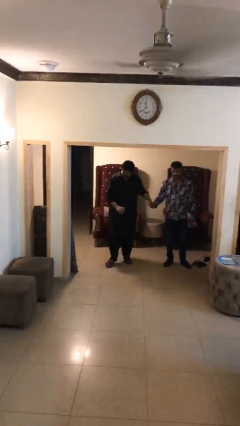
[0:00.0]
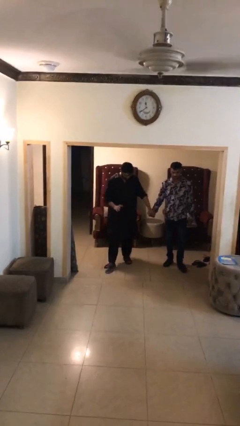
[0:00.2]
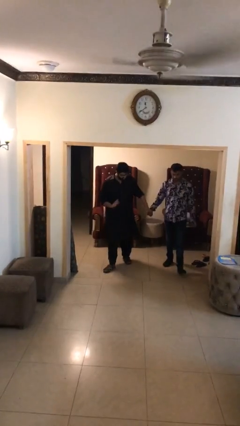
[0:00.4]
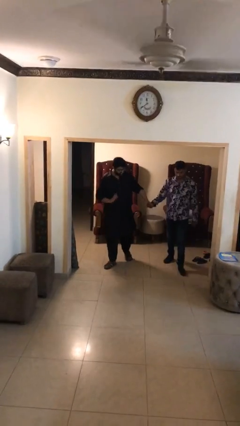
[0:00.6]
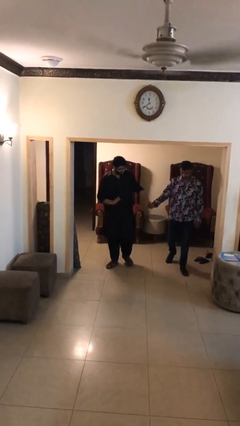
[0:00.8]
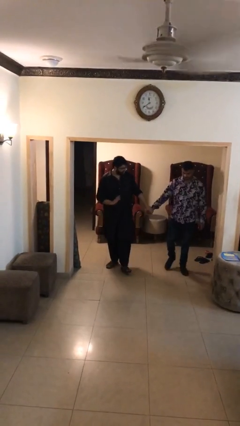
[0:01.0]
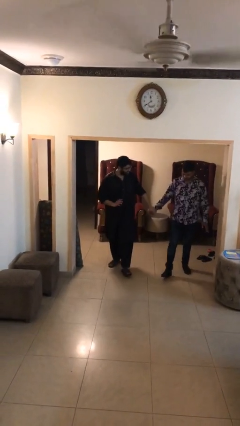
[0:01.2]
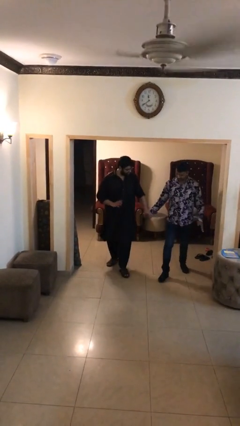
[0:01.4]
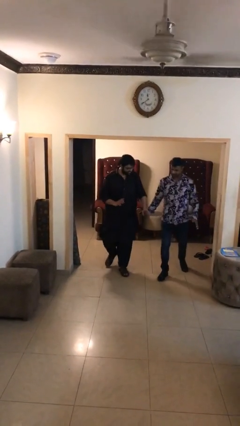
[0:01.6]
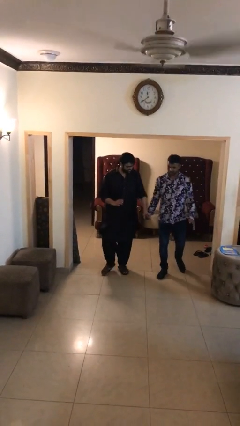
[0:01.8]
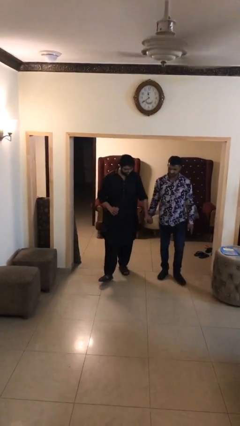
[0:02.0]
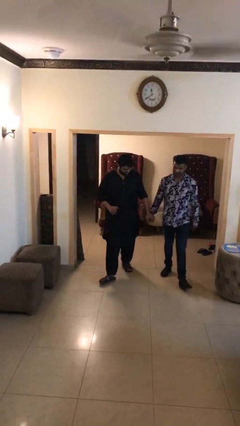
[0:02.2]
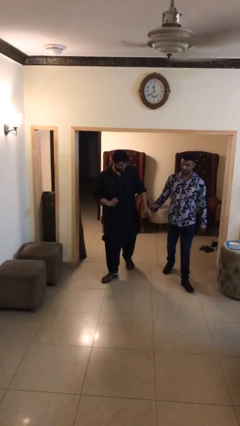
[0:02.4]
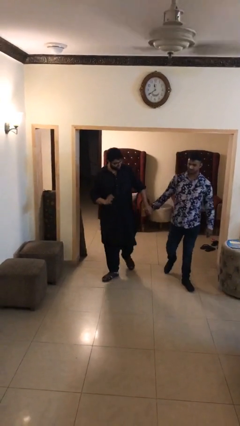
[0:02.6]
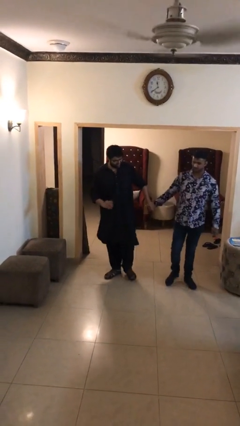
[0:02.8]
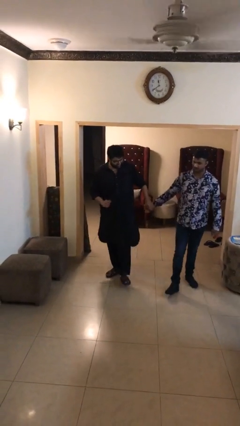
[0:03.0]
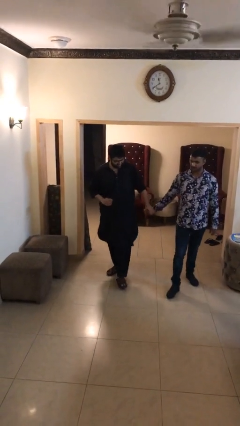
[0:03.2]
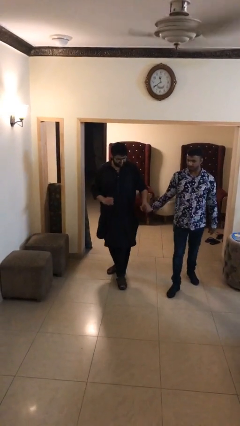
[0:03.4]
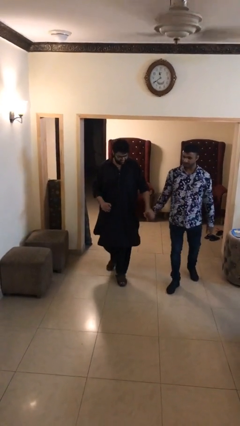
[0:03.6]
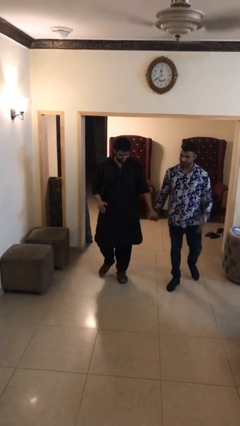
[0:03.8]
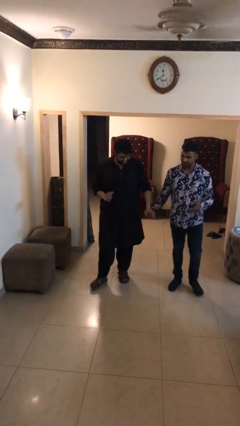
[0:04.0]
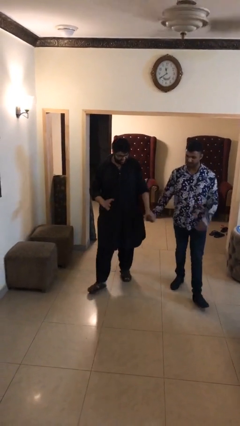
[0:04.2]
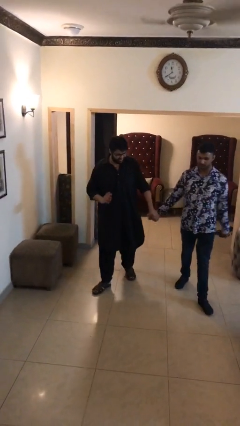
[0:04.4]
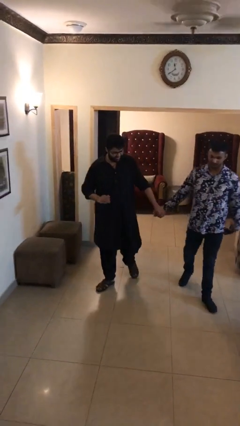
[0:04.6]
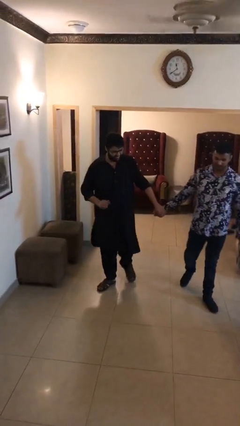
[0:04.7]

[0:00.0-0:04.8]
person holds hand

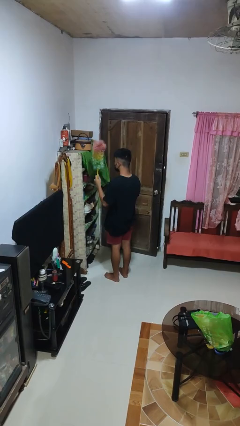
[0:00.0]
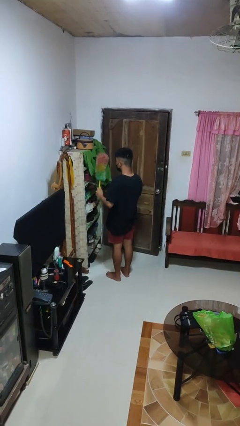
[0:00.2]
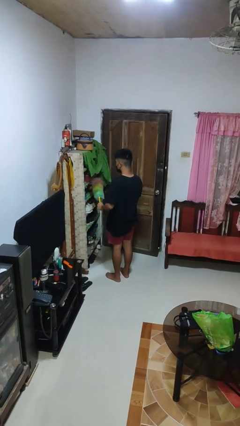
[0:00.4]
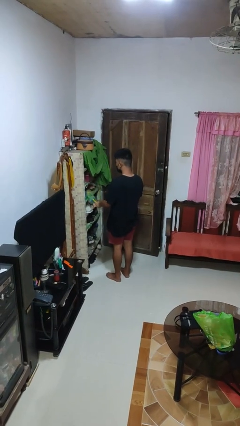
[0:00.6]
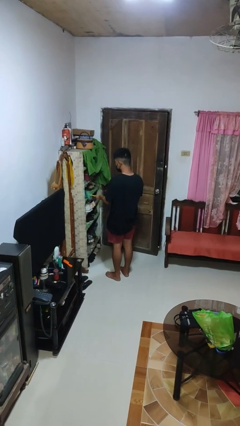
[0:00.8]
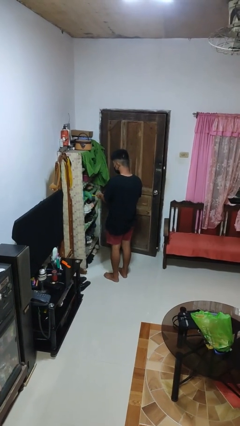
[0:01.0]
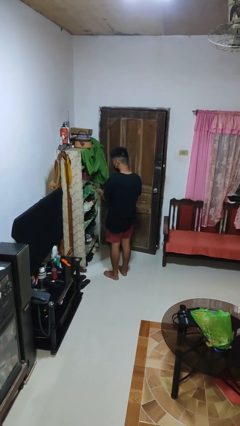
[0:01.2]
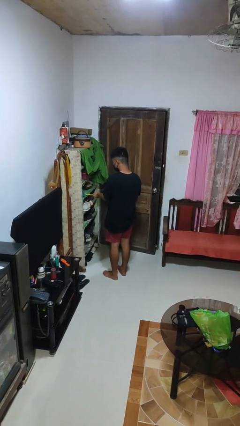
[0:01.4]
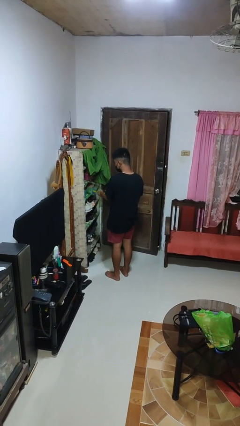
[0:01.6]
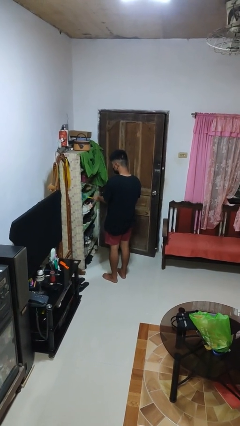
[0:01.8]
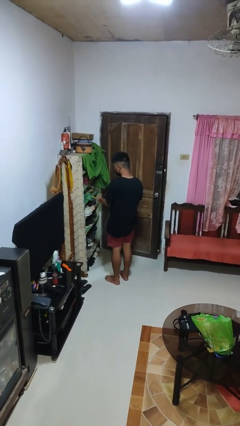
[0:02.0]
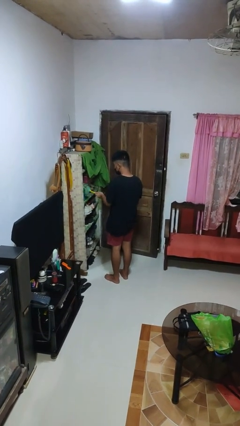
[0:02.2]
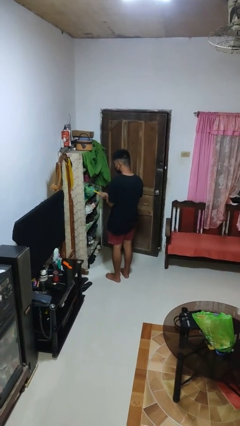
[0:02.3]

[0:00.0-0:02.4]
person dusts furniture

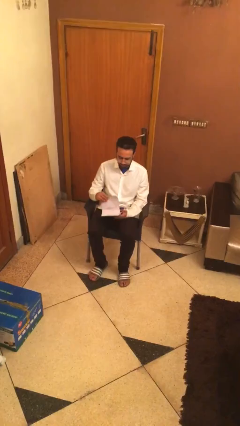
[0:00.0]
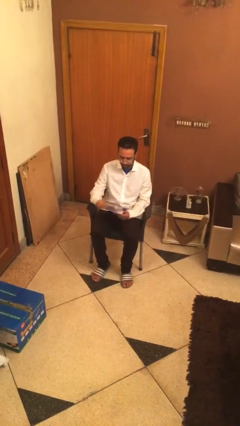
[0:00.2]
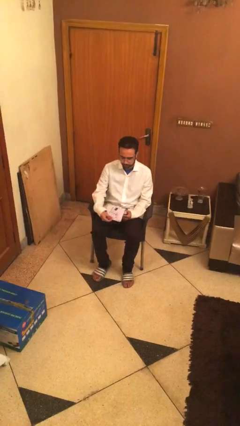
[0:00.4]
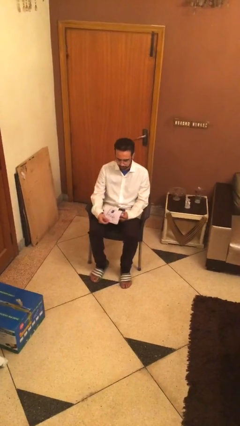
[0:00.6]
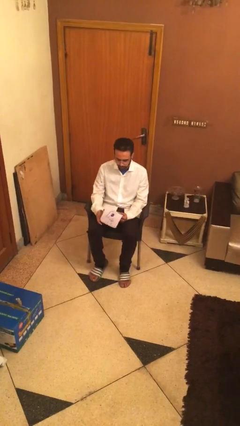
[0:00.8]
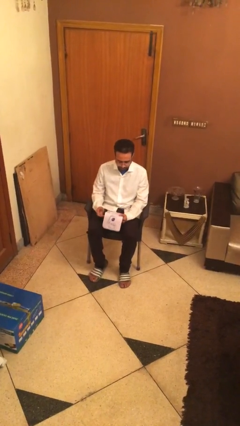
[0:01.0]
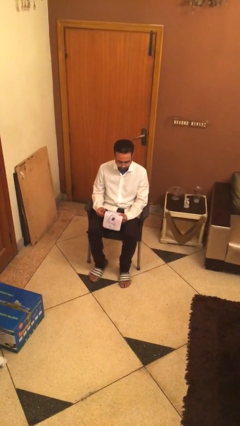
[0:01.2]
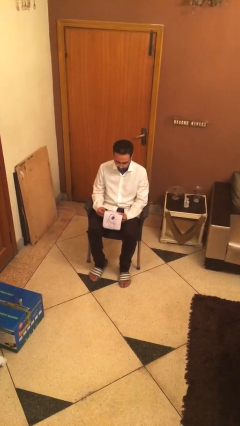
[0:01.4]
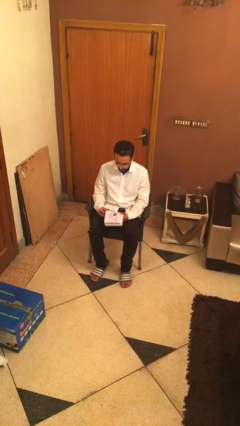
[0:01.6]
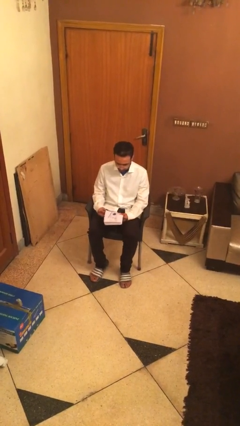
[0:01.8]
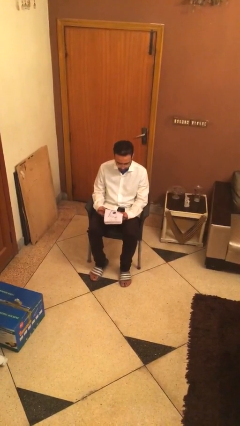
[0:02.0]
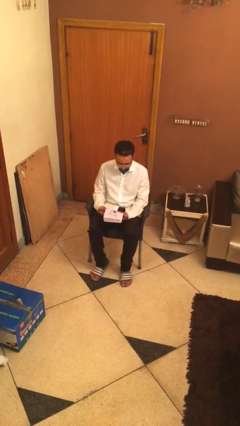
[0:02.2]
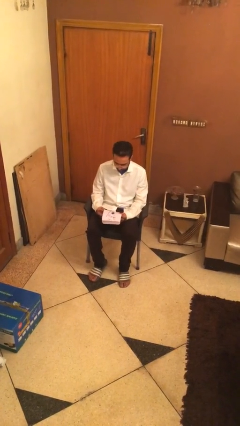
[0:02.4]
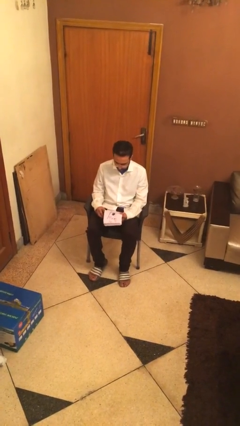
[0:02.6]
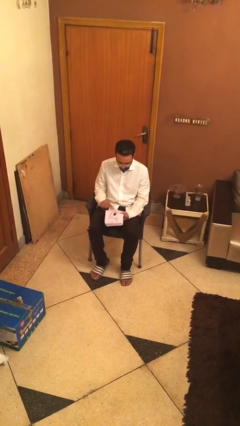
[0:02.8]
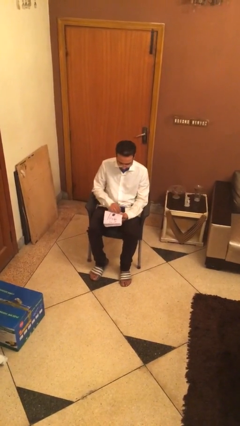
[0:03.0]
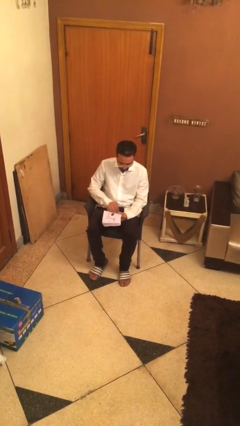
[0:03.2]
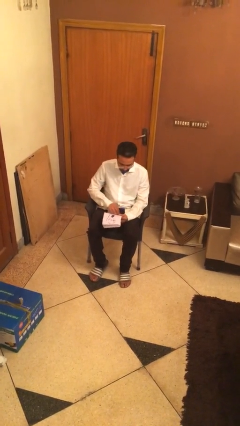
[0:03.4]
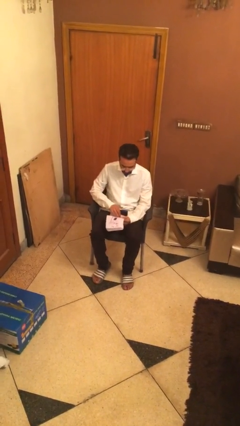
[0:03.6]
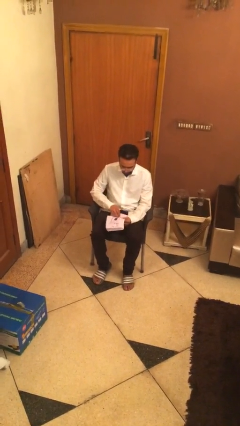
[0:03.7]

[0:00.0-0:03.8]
person reads document

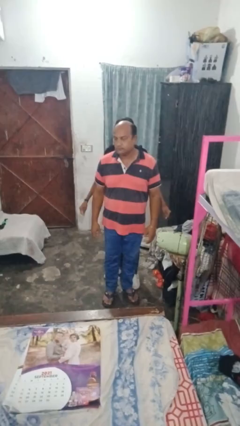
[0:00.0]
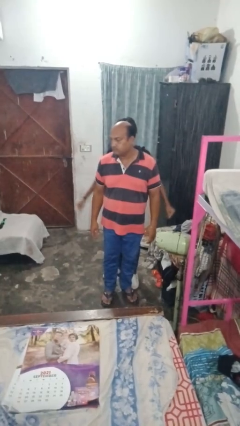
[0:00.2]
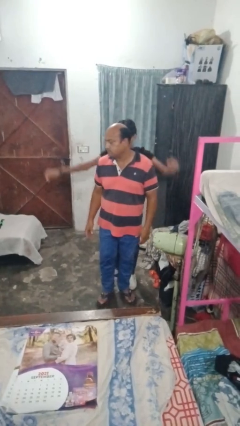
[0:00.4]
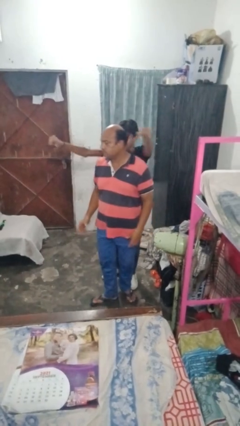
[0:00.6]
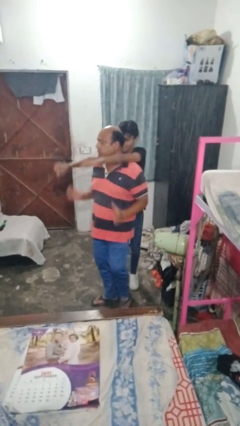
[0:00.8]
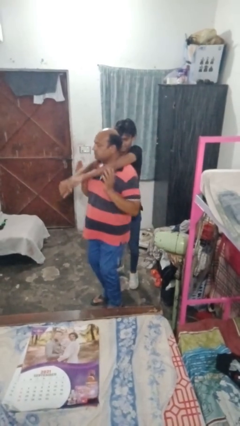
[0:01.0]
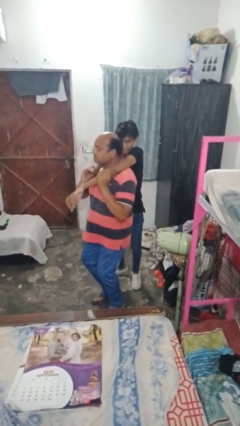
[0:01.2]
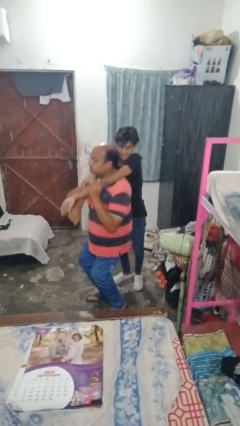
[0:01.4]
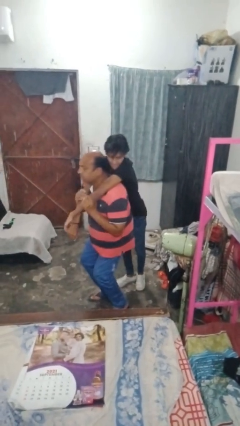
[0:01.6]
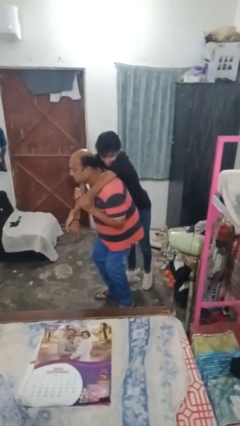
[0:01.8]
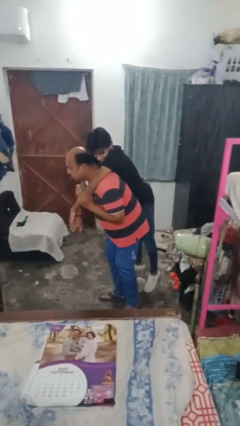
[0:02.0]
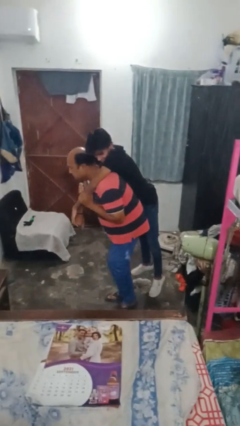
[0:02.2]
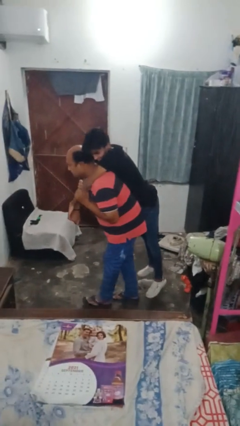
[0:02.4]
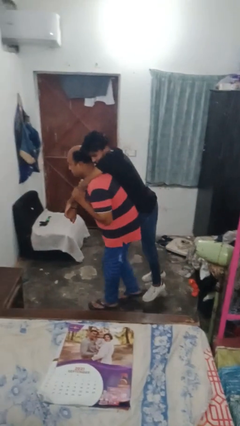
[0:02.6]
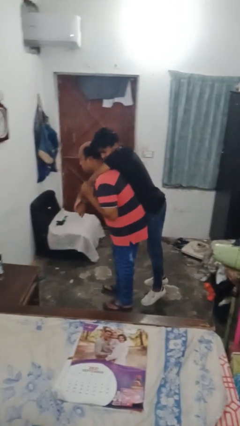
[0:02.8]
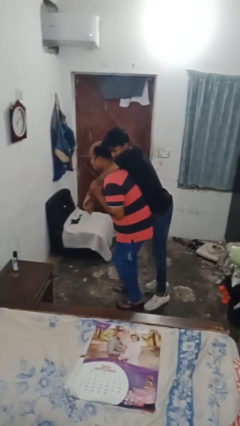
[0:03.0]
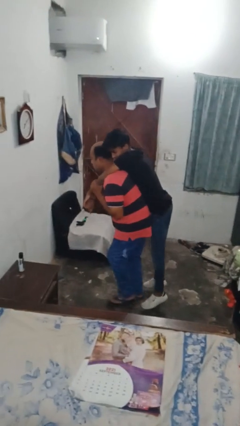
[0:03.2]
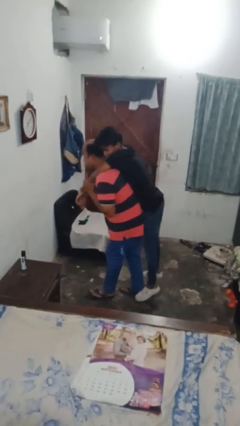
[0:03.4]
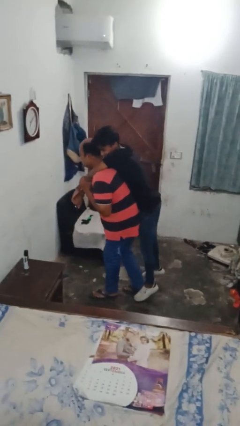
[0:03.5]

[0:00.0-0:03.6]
person carries person on back

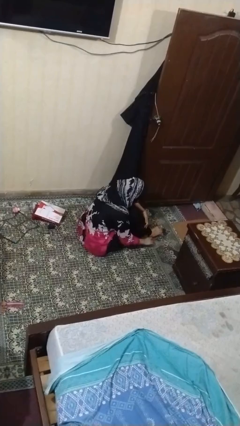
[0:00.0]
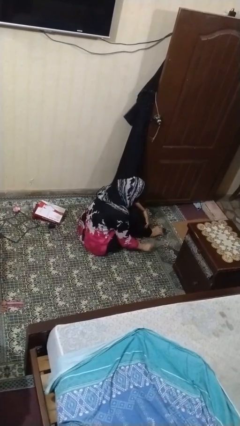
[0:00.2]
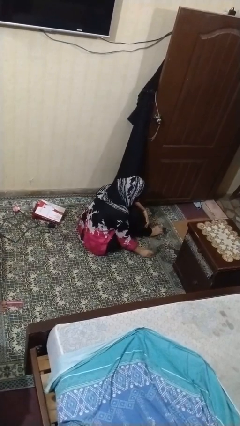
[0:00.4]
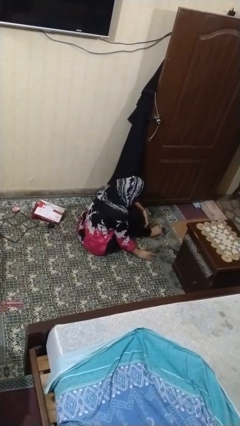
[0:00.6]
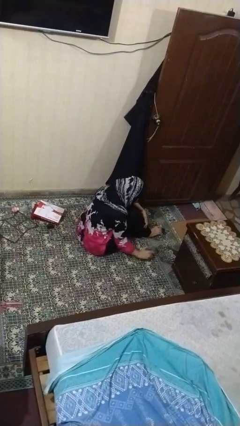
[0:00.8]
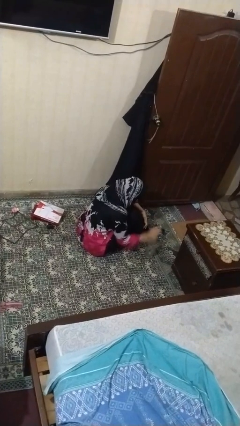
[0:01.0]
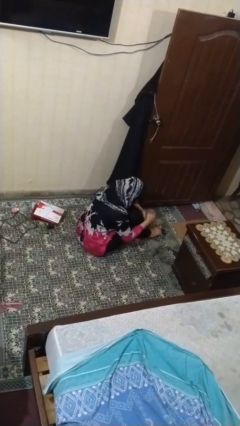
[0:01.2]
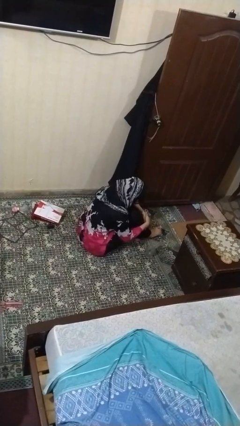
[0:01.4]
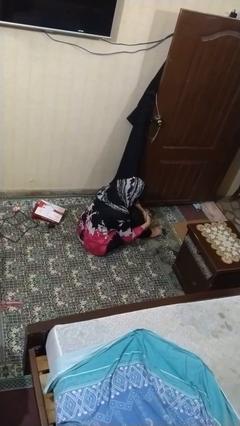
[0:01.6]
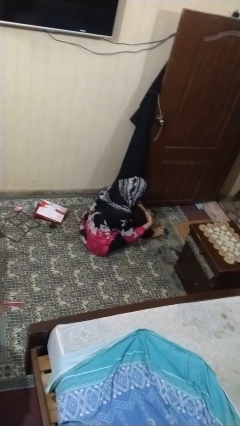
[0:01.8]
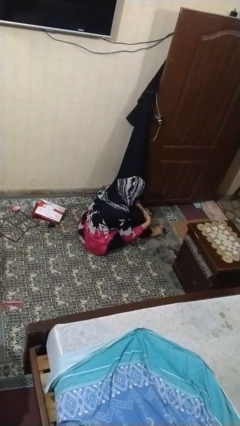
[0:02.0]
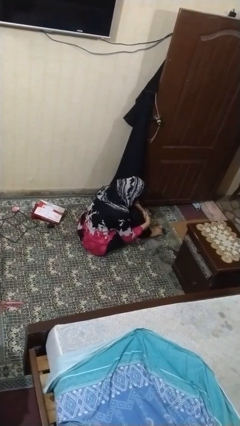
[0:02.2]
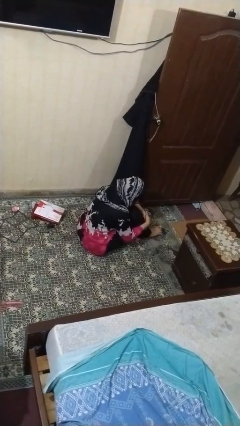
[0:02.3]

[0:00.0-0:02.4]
person sets upright glass

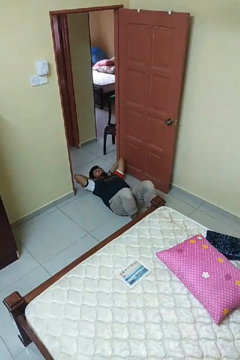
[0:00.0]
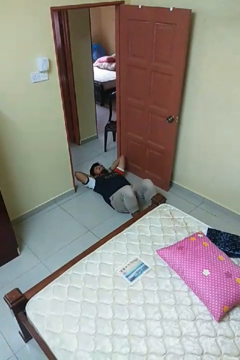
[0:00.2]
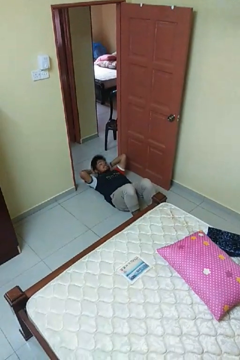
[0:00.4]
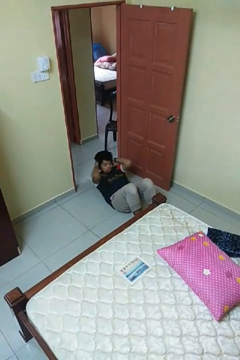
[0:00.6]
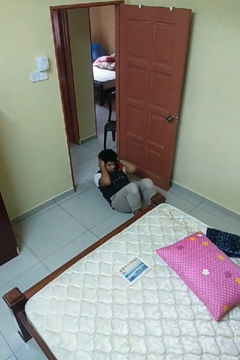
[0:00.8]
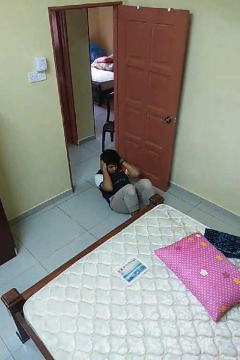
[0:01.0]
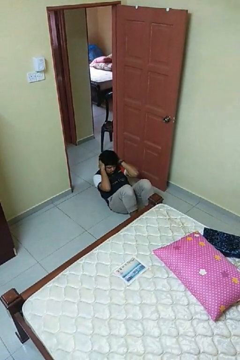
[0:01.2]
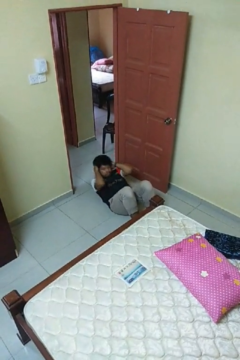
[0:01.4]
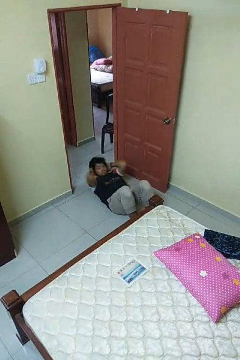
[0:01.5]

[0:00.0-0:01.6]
person exercises with situp
